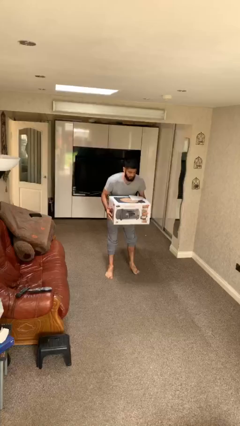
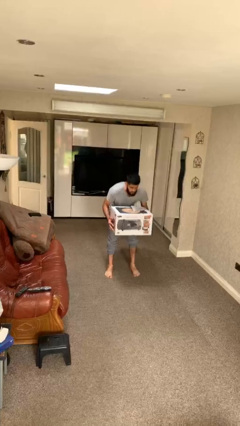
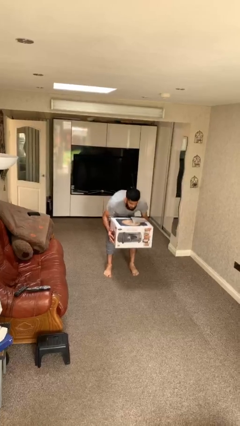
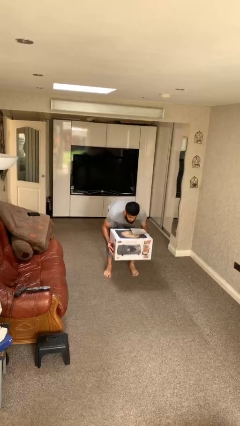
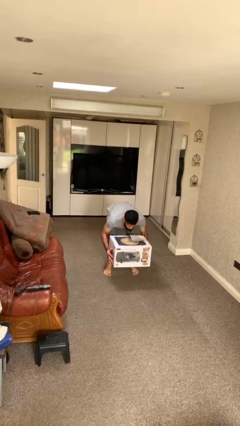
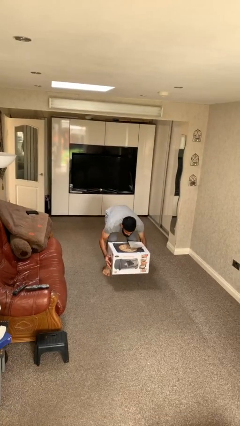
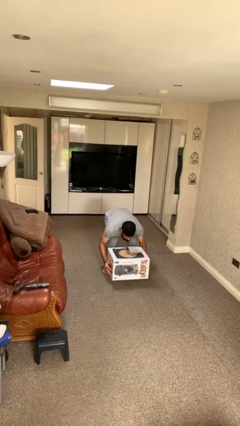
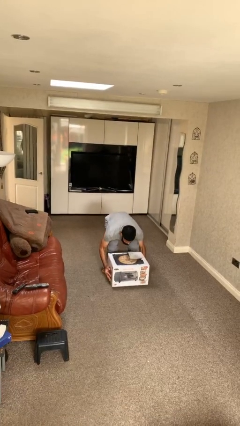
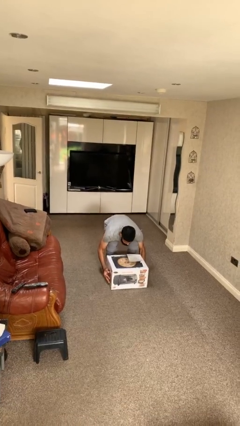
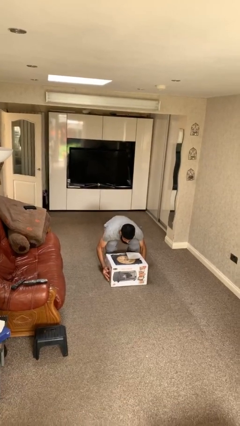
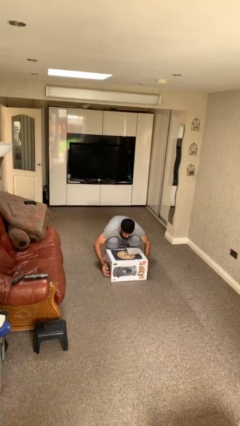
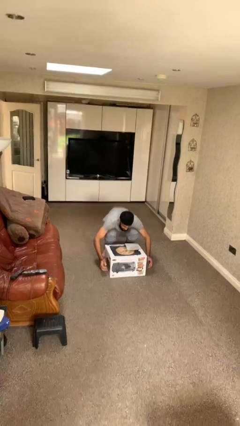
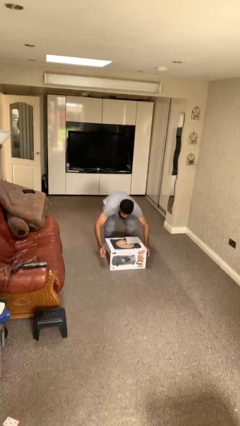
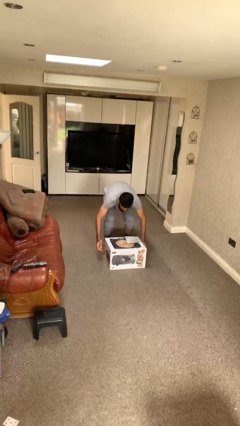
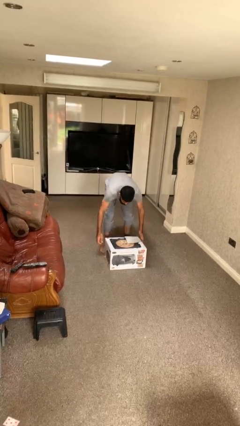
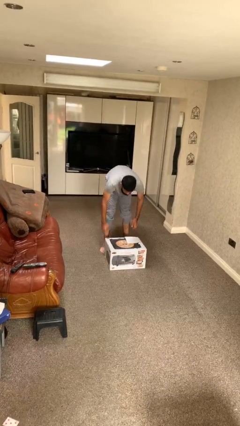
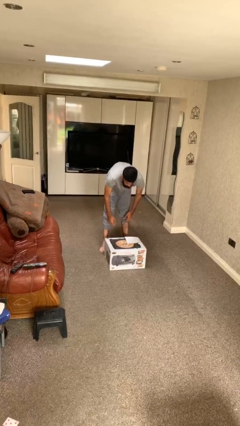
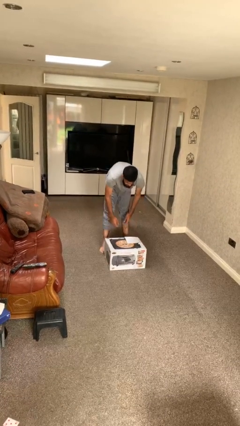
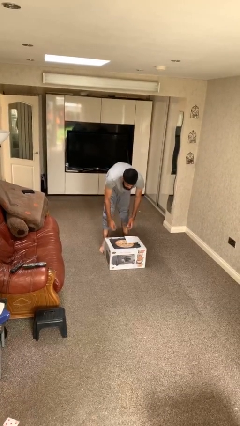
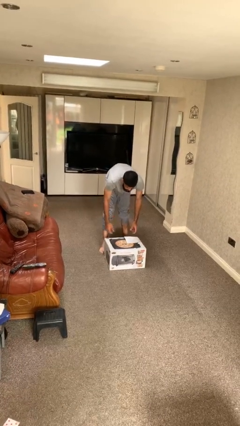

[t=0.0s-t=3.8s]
person puts down object on floor

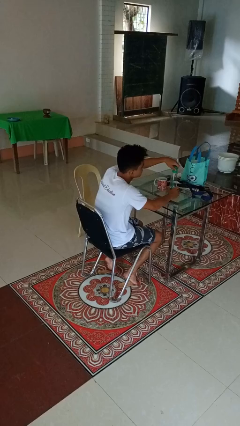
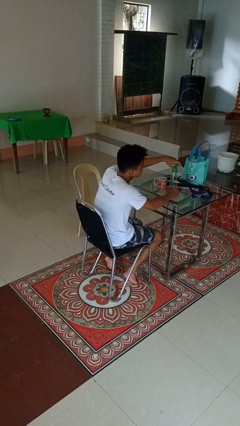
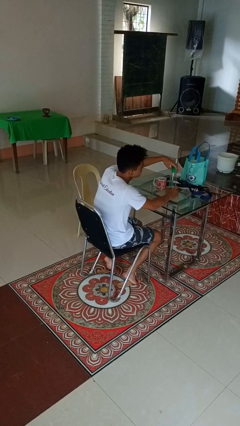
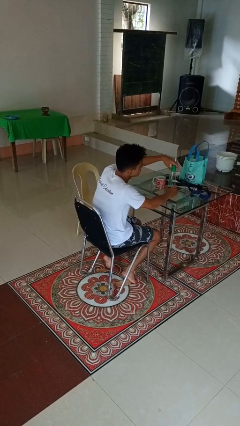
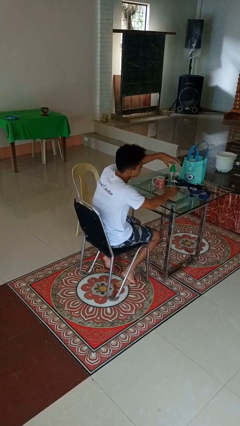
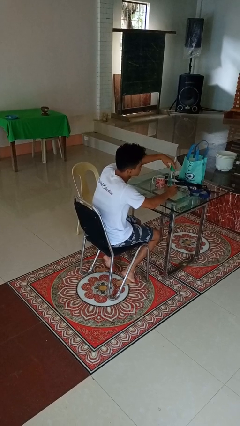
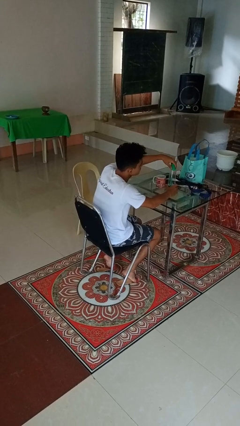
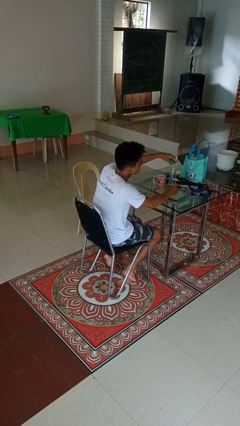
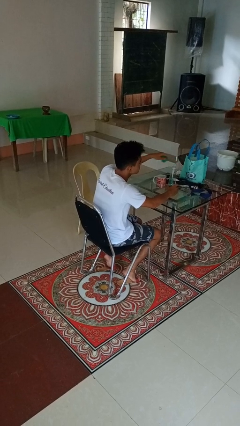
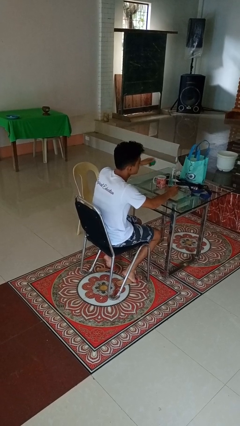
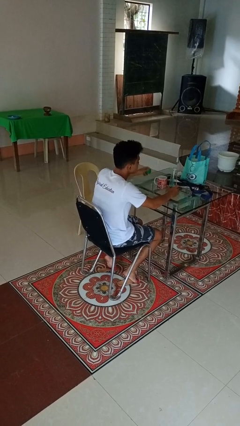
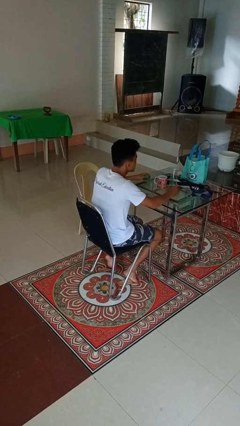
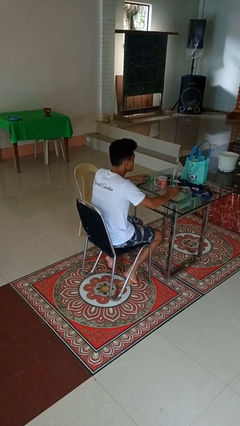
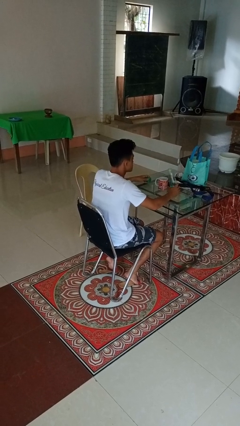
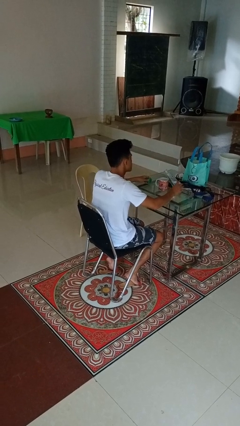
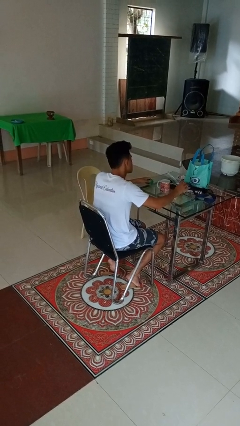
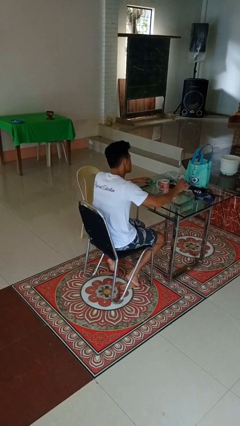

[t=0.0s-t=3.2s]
person unscrews lid from bottle

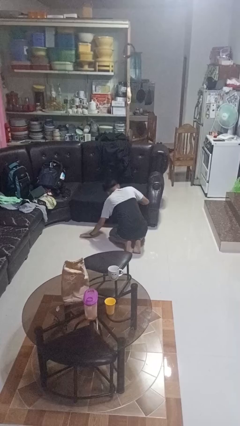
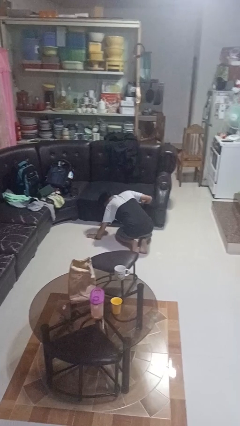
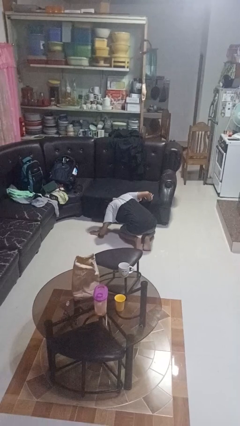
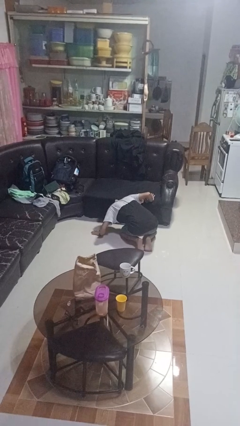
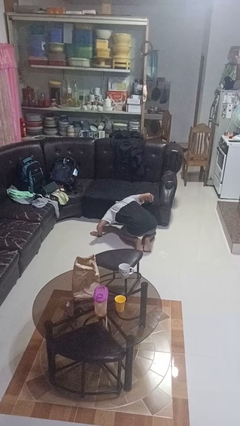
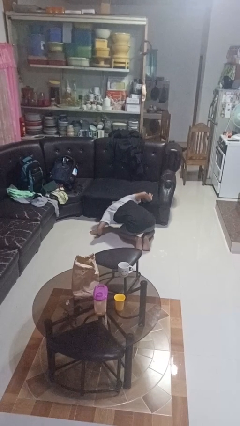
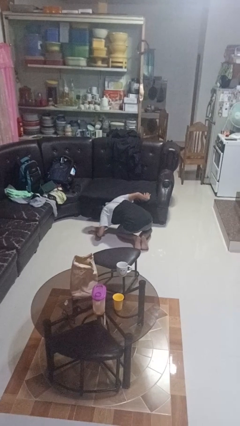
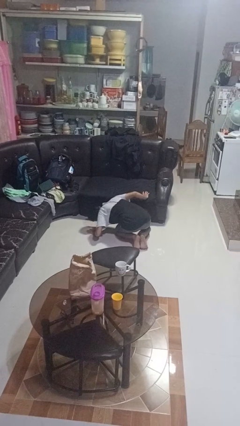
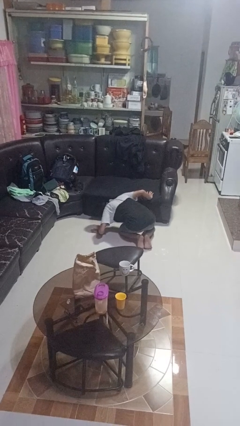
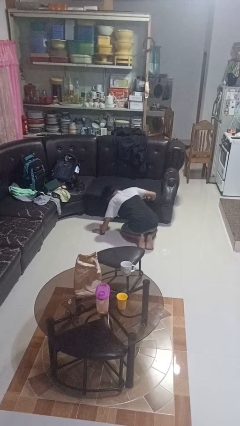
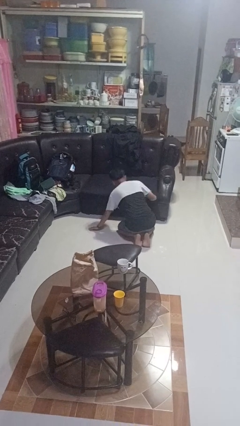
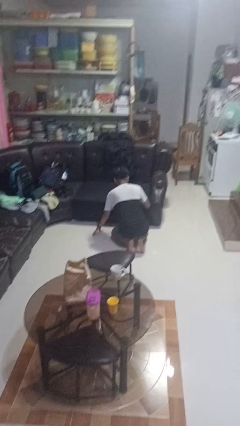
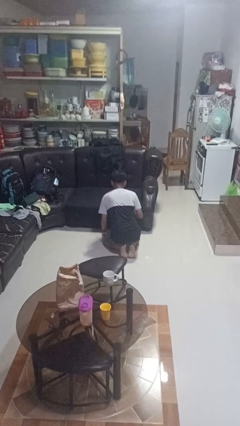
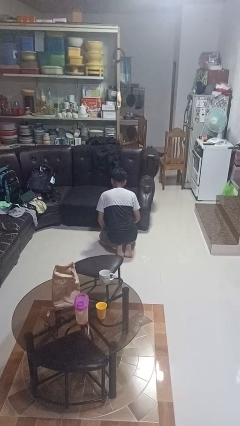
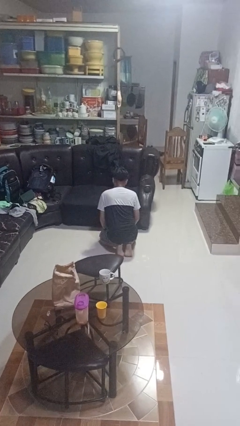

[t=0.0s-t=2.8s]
person searches under couch

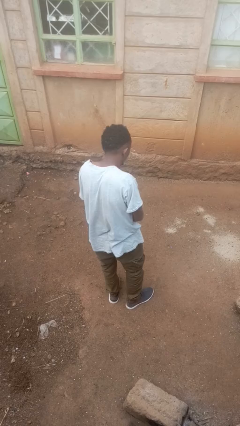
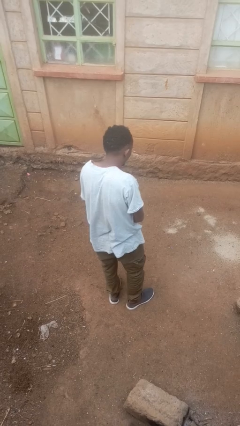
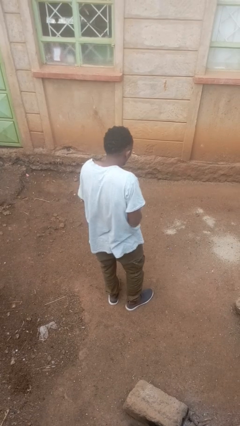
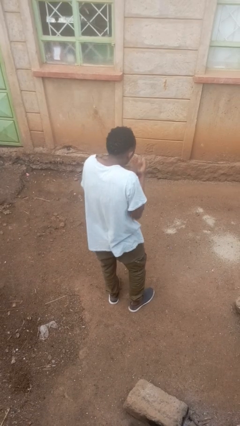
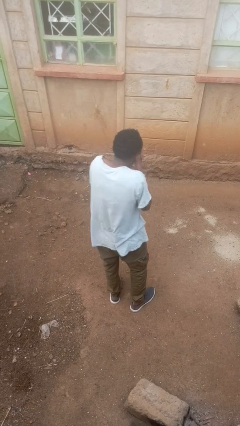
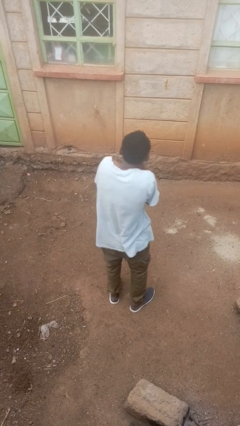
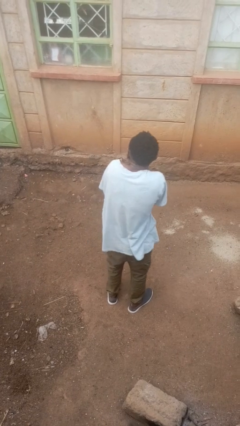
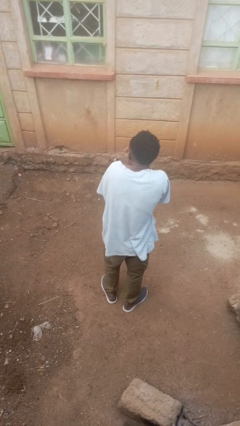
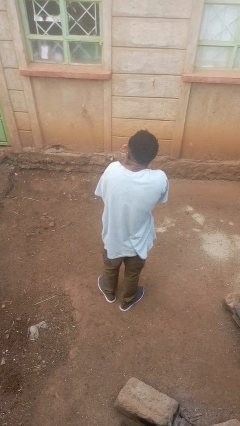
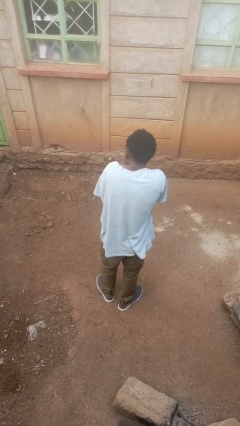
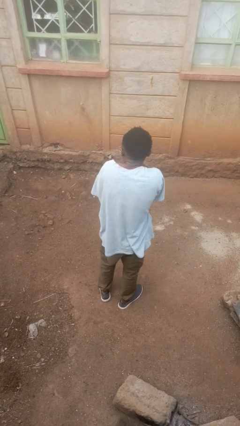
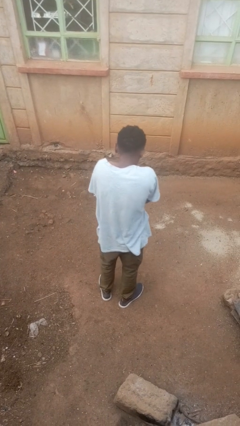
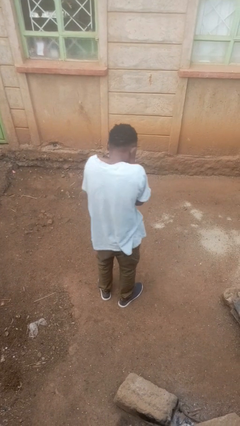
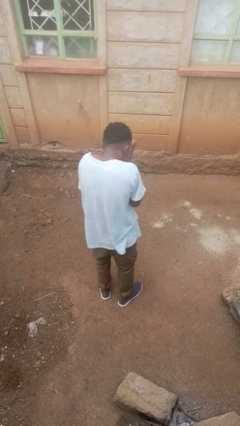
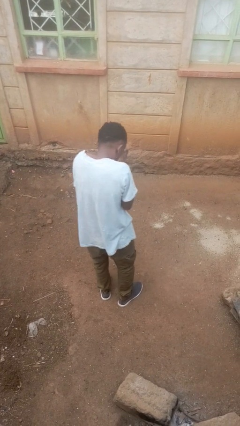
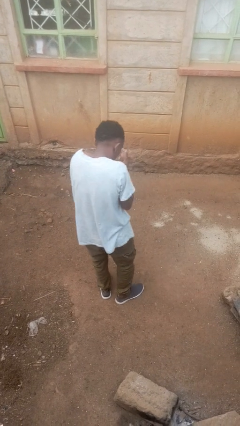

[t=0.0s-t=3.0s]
person blows into hands

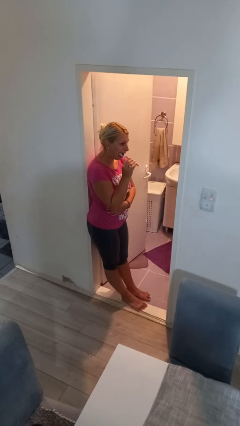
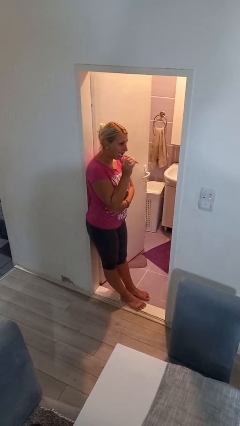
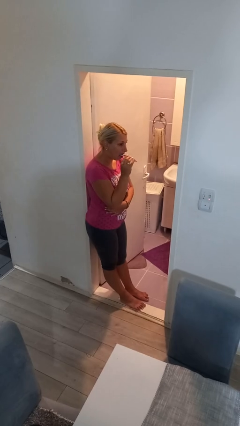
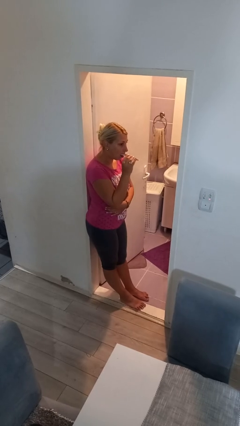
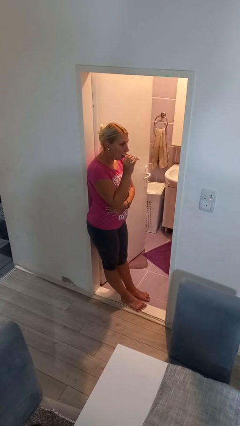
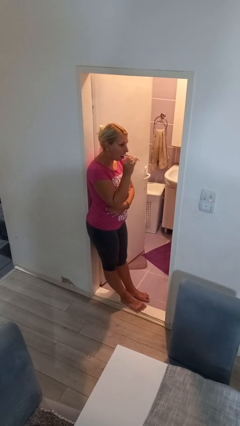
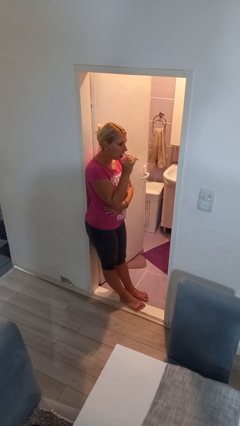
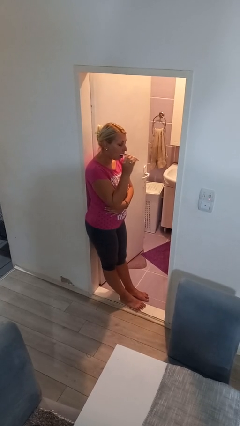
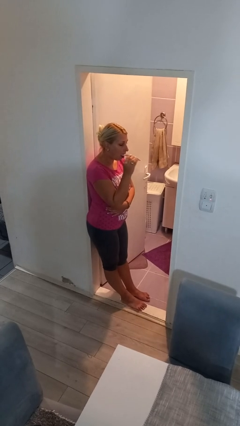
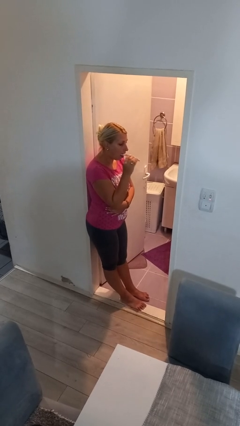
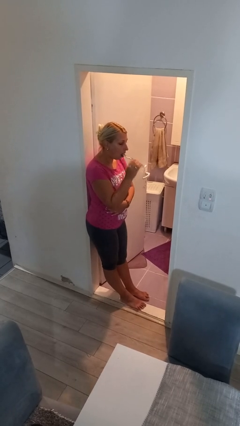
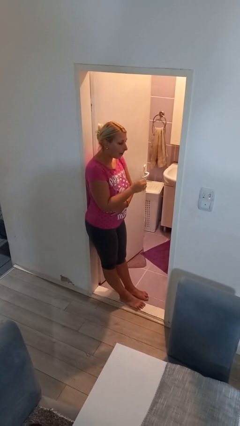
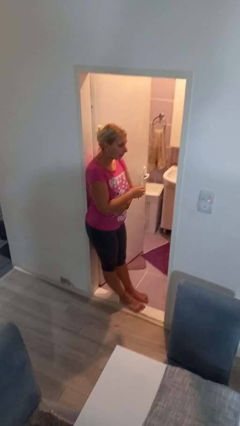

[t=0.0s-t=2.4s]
person brushes teeth

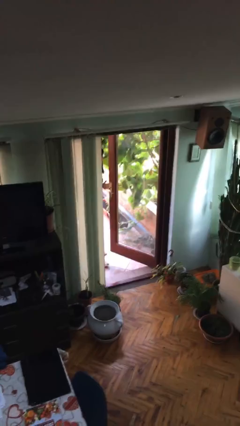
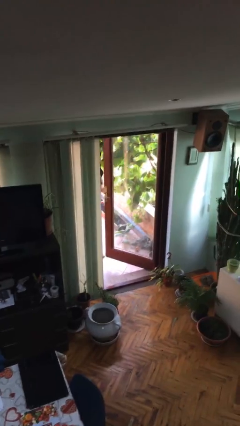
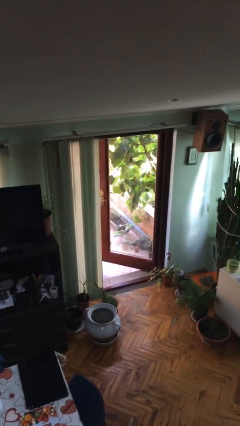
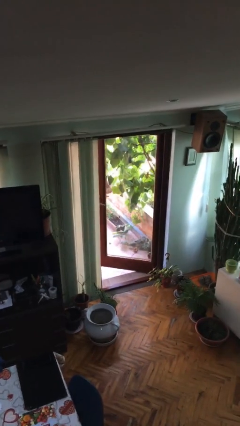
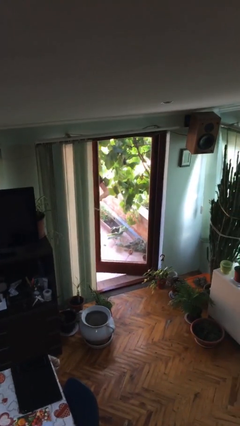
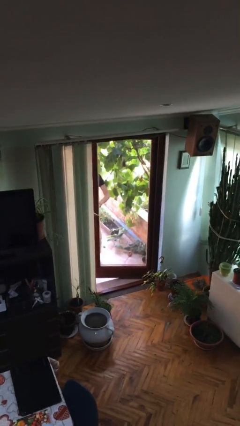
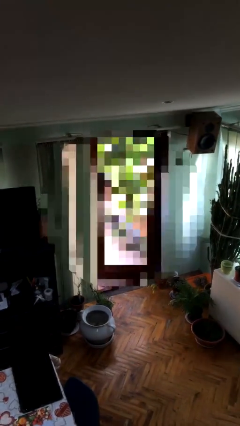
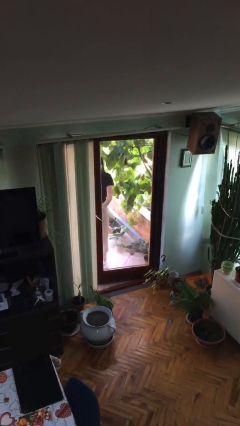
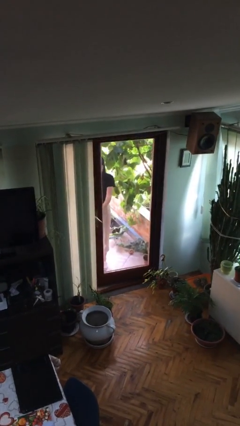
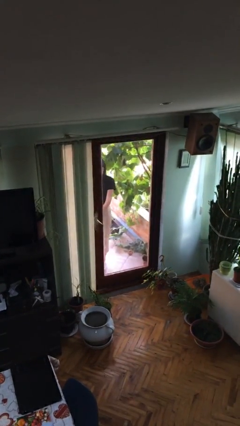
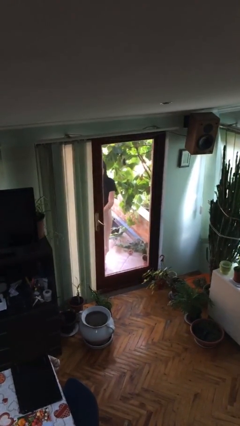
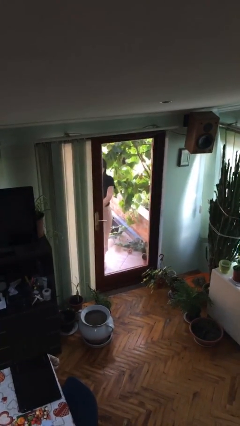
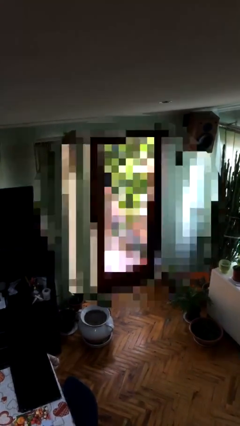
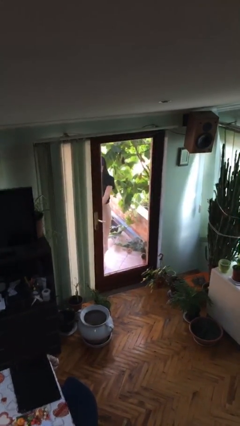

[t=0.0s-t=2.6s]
person closes facility door
